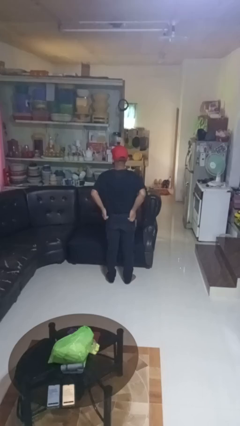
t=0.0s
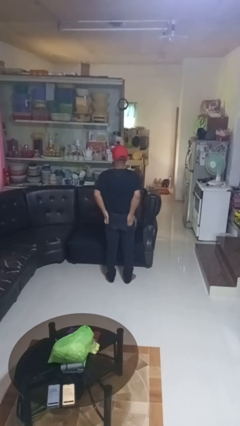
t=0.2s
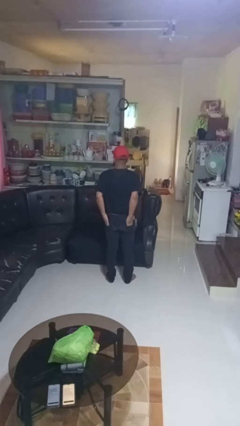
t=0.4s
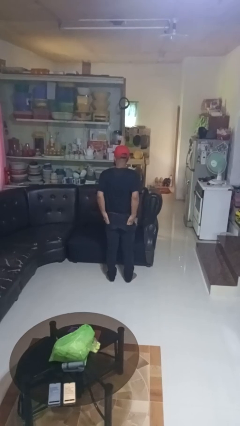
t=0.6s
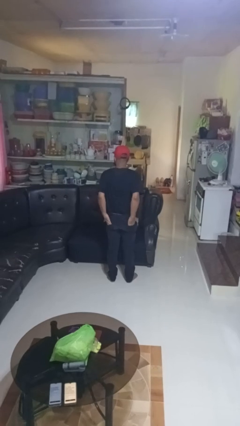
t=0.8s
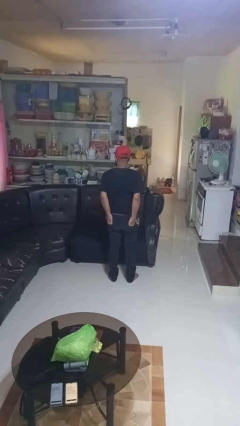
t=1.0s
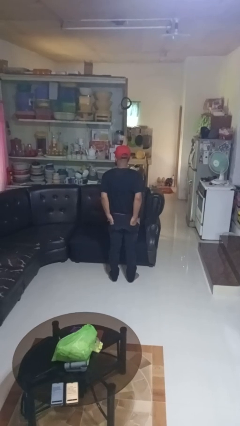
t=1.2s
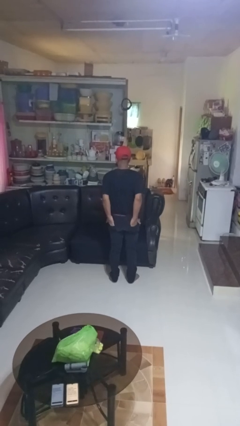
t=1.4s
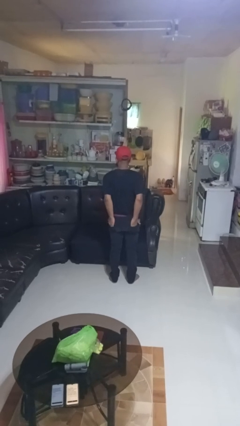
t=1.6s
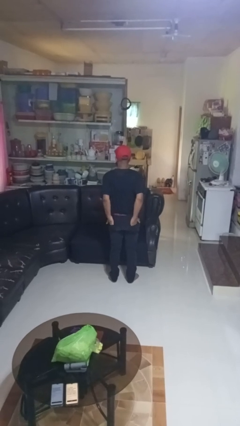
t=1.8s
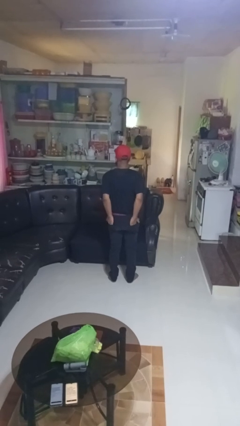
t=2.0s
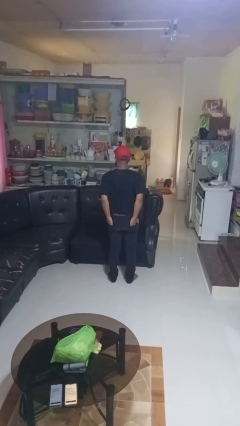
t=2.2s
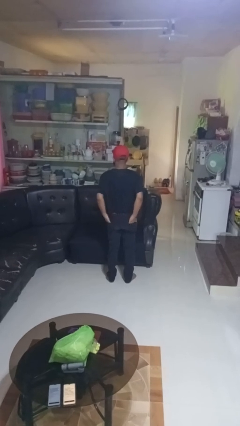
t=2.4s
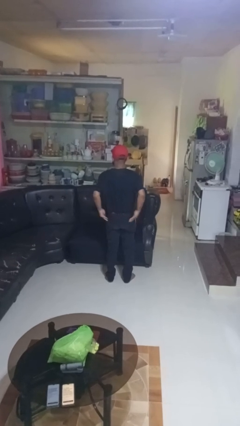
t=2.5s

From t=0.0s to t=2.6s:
person puts hands in back pockets

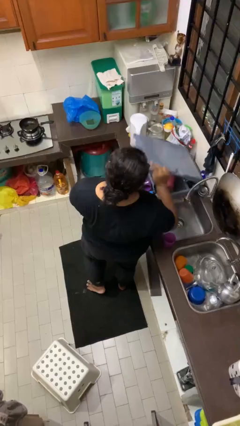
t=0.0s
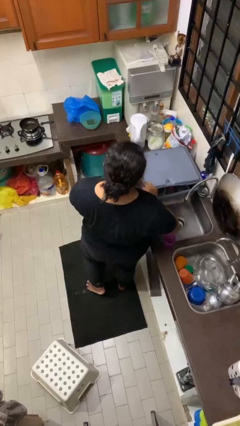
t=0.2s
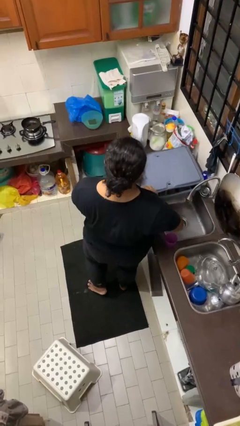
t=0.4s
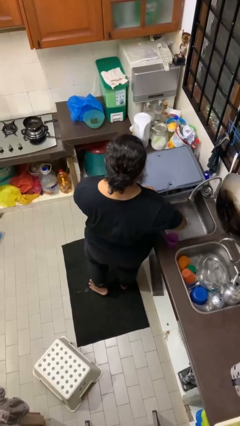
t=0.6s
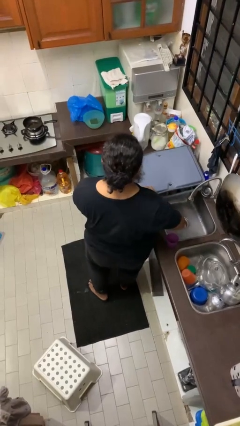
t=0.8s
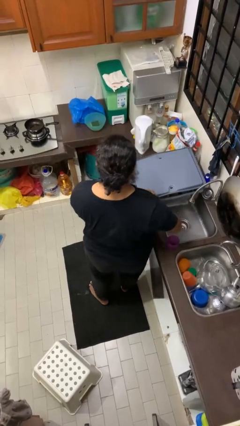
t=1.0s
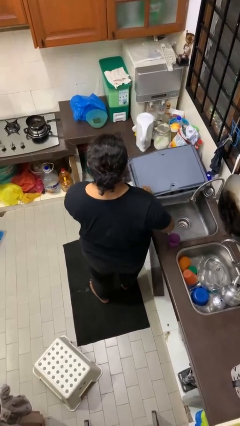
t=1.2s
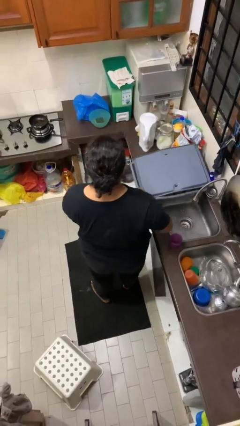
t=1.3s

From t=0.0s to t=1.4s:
person closes dishwasher

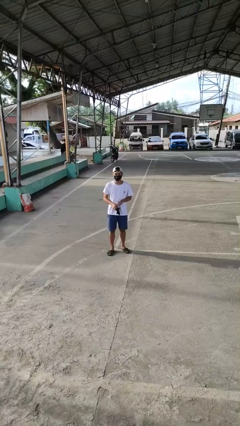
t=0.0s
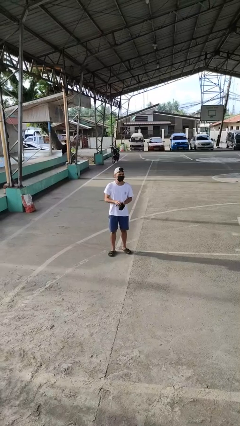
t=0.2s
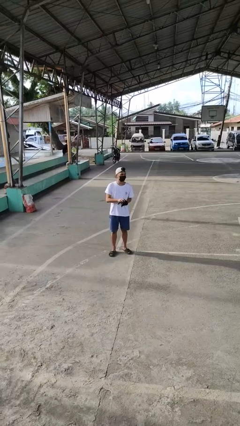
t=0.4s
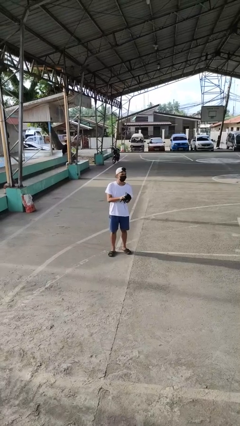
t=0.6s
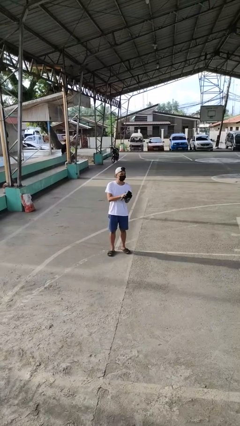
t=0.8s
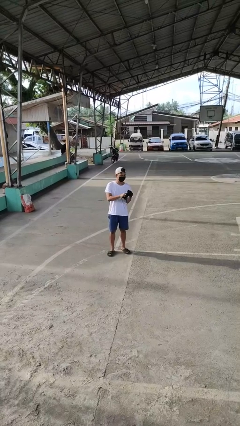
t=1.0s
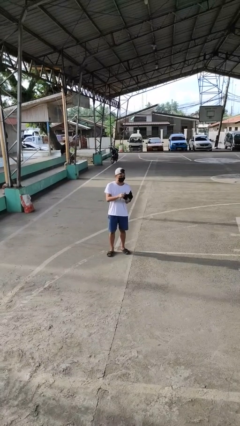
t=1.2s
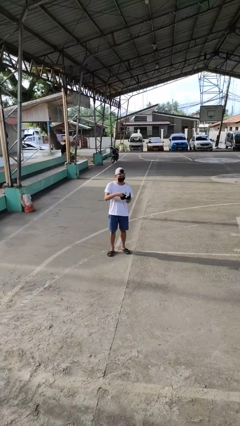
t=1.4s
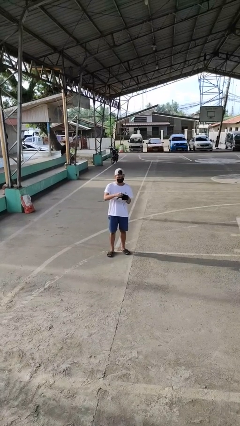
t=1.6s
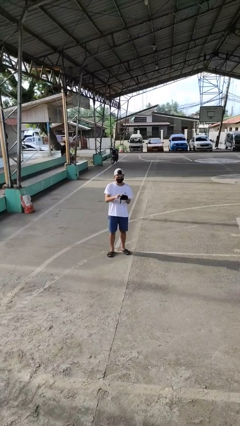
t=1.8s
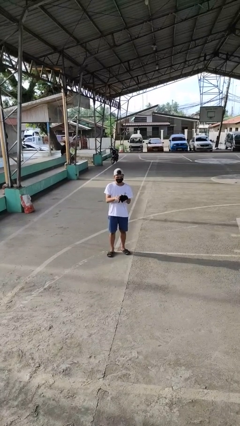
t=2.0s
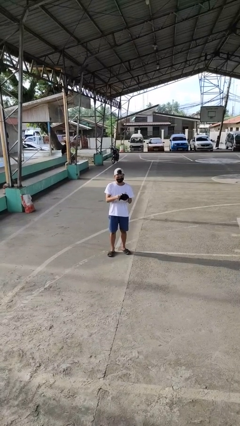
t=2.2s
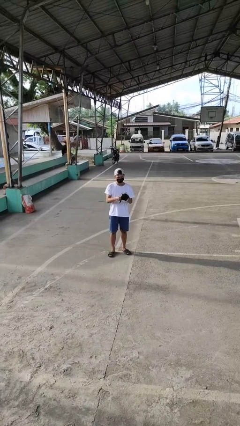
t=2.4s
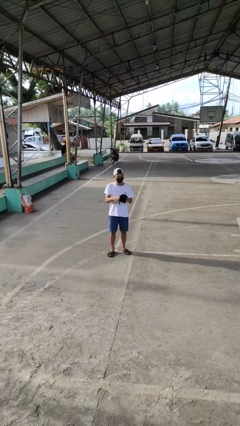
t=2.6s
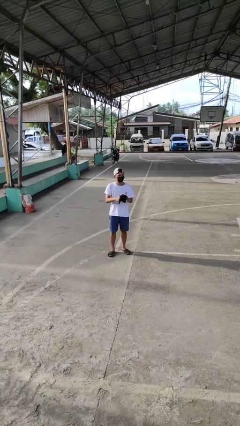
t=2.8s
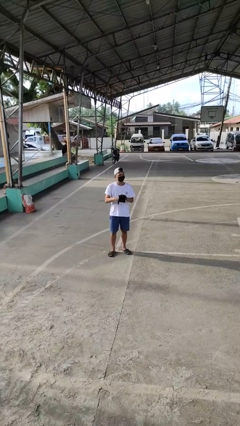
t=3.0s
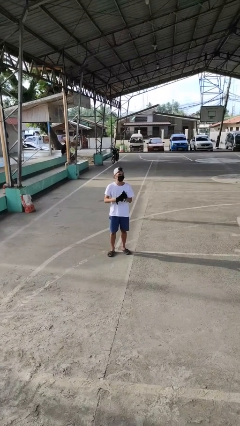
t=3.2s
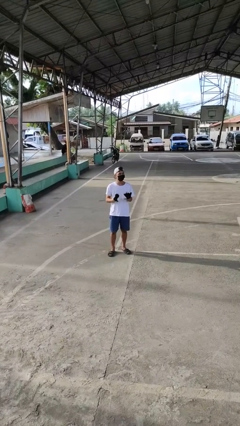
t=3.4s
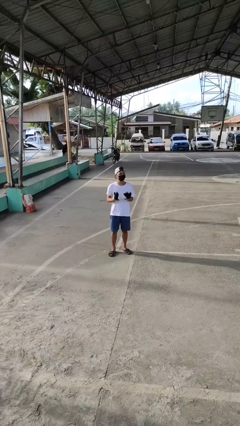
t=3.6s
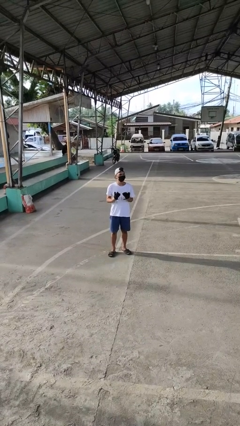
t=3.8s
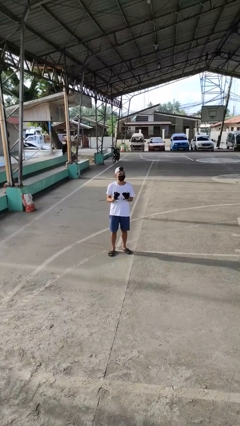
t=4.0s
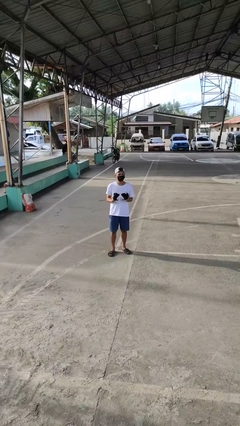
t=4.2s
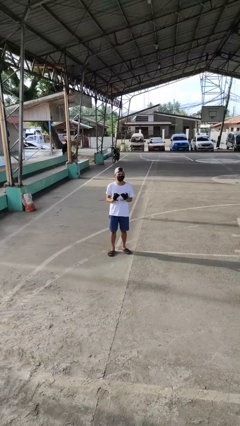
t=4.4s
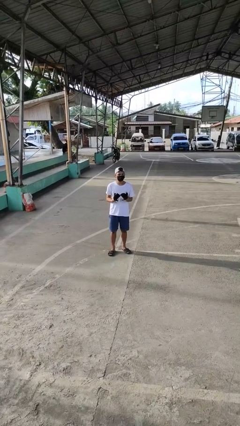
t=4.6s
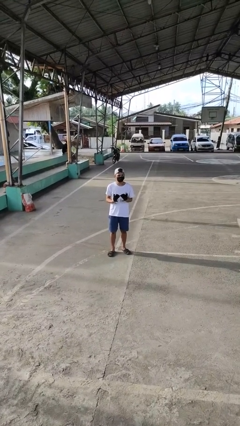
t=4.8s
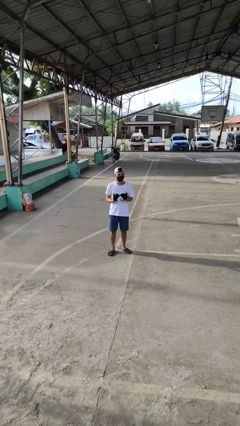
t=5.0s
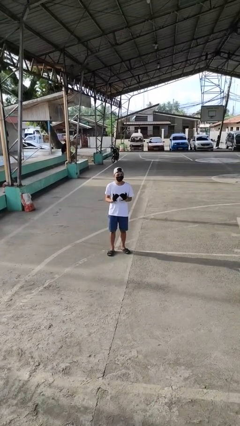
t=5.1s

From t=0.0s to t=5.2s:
person puts on gloves

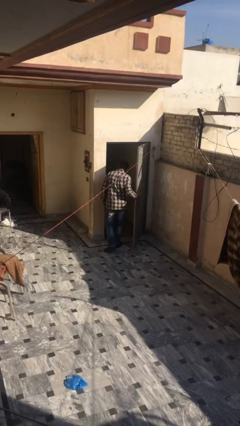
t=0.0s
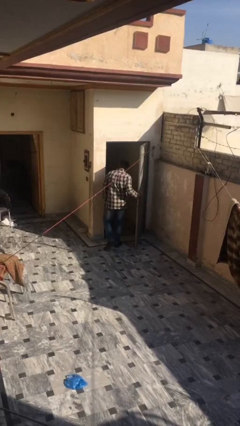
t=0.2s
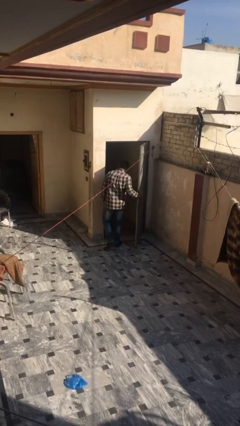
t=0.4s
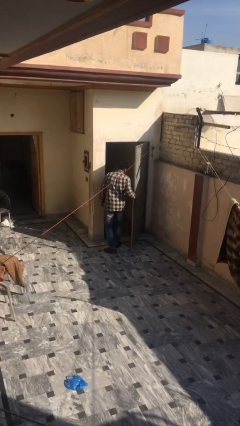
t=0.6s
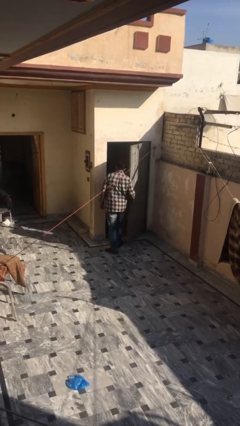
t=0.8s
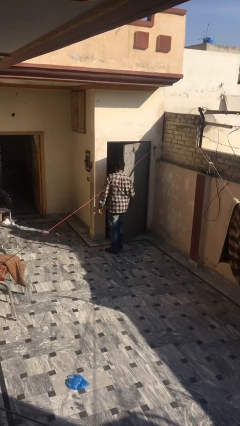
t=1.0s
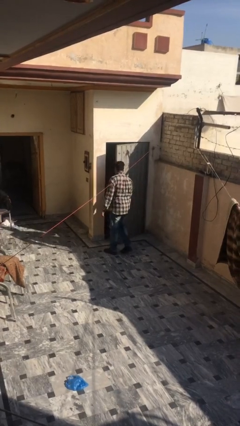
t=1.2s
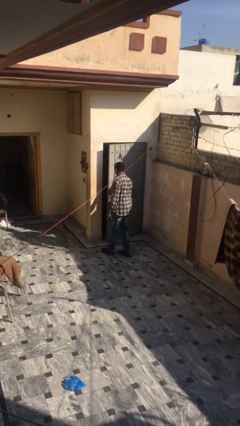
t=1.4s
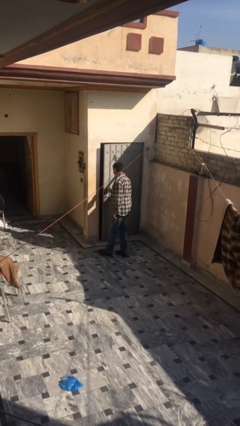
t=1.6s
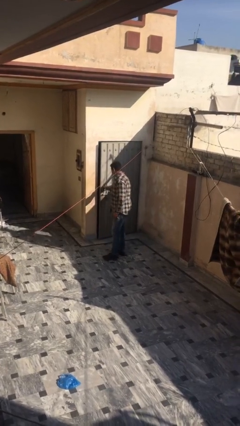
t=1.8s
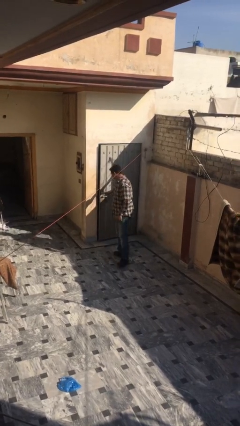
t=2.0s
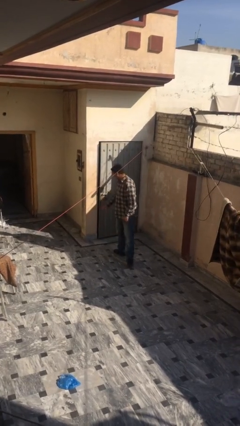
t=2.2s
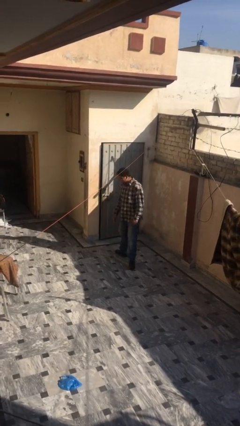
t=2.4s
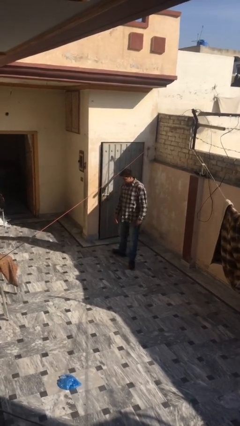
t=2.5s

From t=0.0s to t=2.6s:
person closes facility door

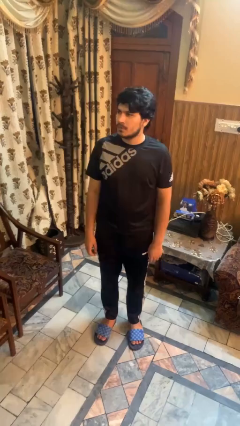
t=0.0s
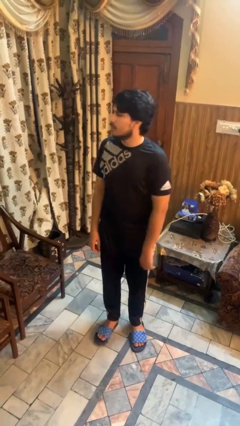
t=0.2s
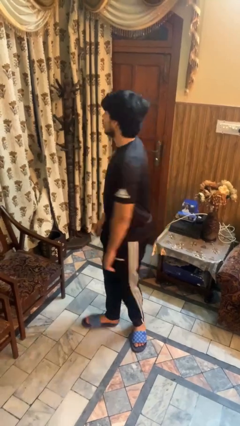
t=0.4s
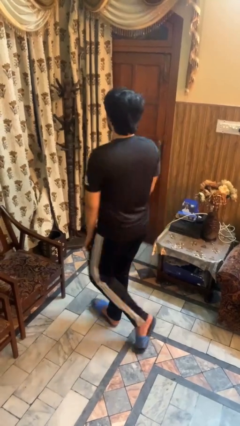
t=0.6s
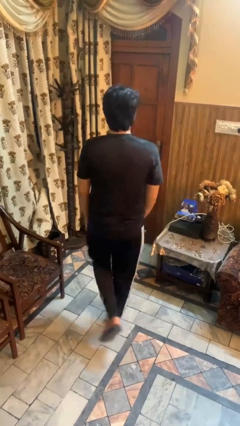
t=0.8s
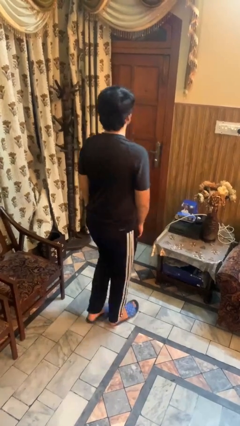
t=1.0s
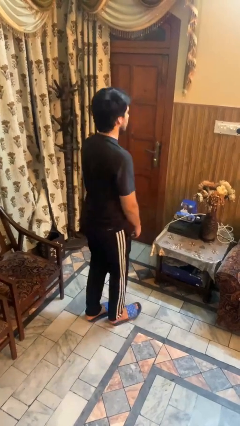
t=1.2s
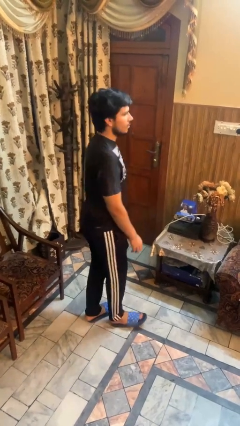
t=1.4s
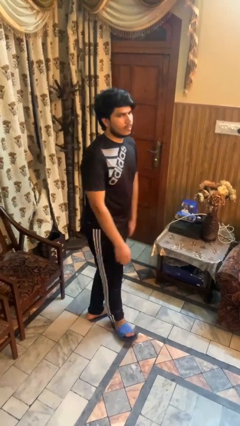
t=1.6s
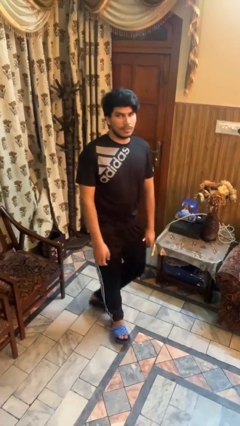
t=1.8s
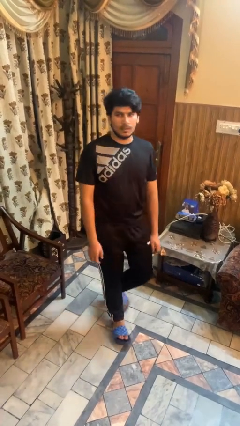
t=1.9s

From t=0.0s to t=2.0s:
person twirls

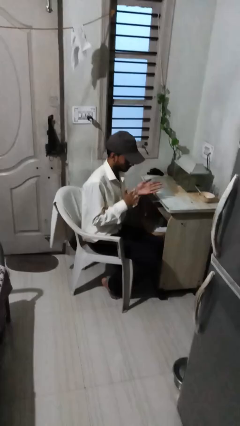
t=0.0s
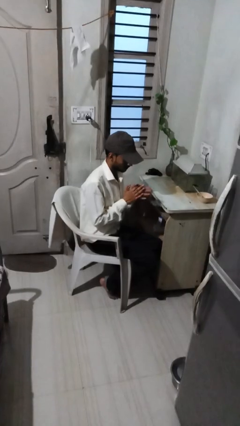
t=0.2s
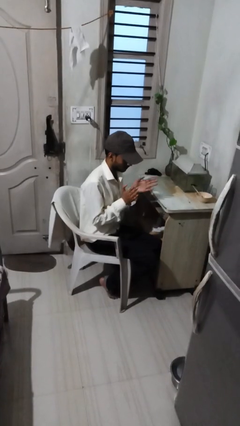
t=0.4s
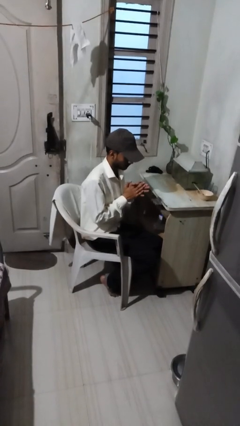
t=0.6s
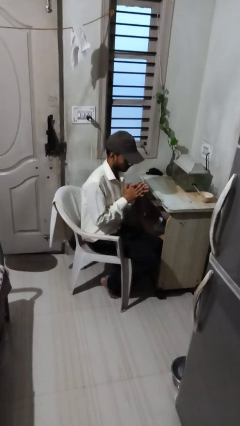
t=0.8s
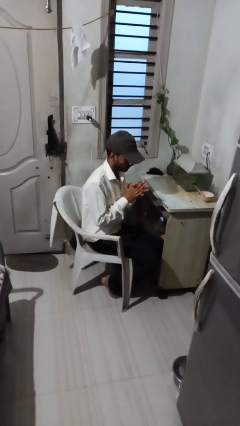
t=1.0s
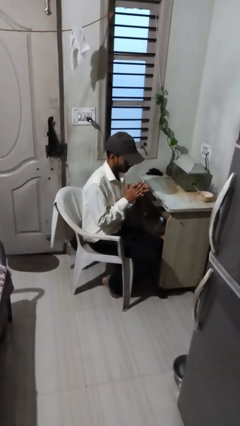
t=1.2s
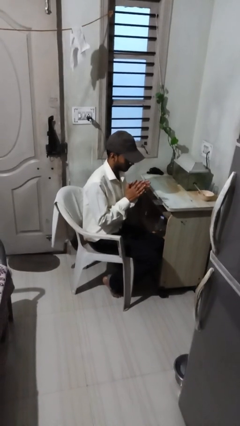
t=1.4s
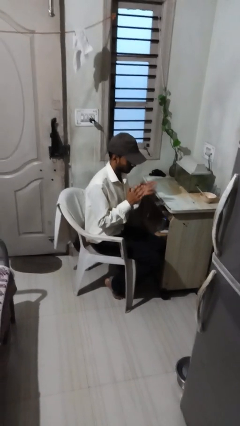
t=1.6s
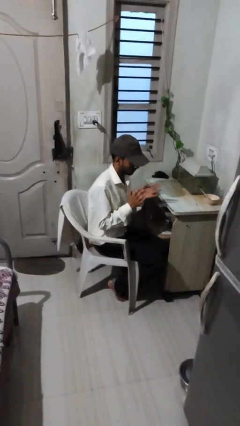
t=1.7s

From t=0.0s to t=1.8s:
person claps hands

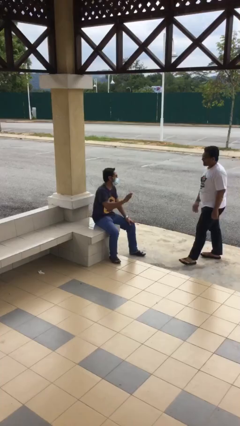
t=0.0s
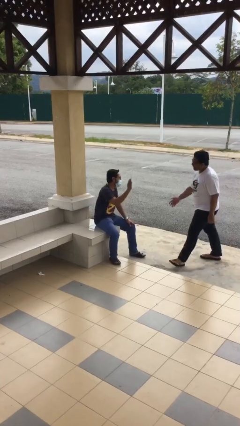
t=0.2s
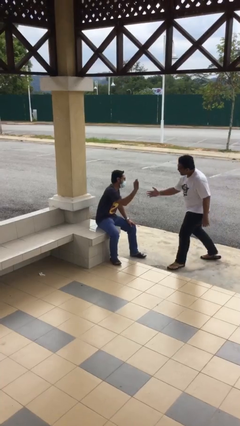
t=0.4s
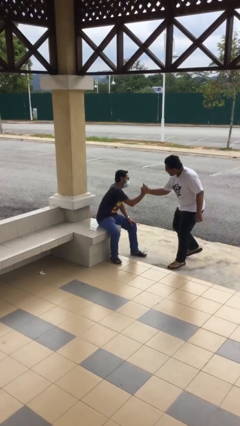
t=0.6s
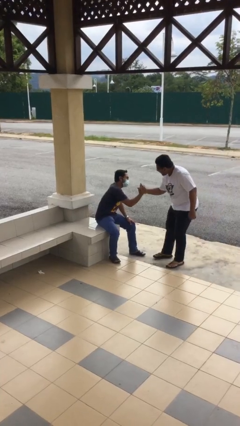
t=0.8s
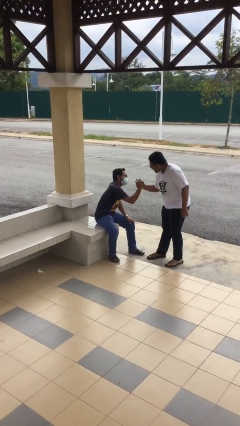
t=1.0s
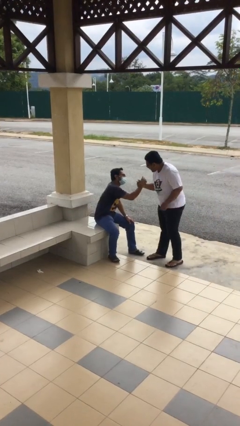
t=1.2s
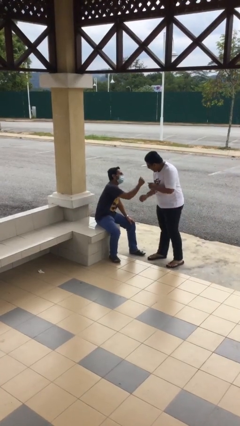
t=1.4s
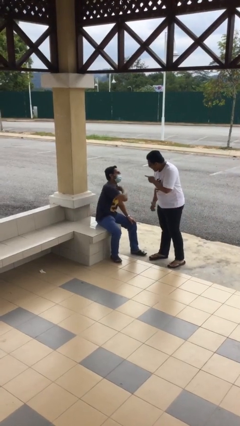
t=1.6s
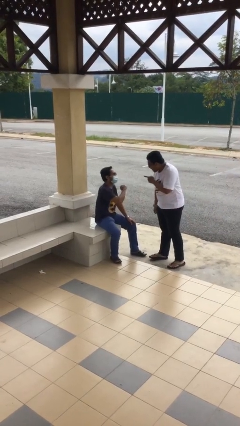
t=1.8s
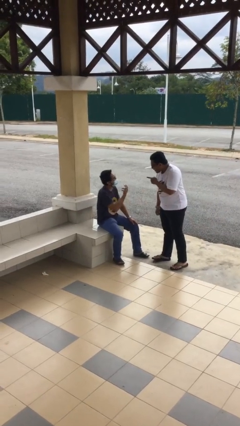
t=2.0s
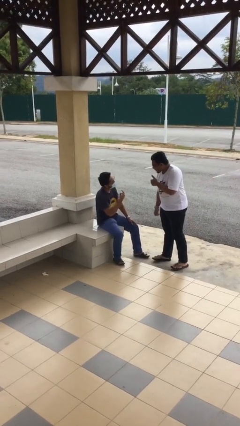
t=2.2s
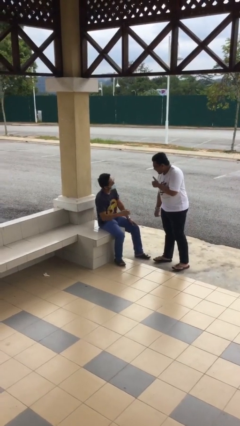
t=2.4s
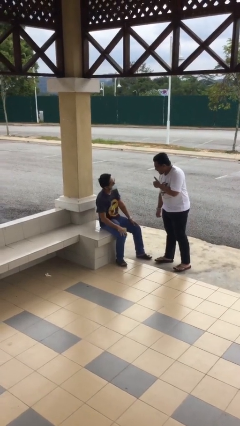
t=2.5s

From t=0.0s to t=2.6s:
person shakes hand
